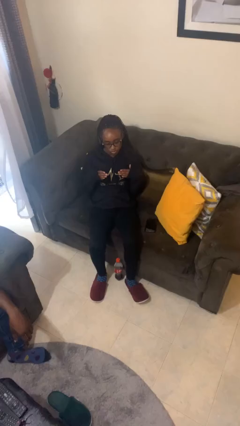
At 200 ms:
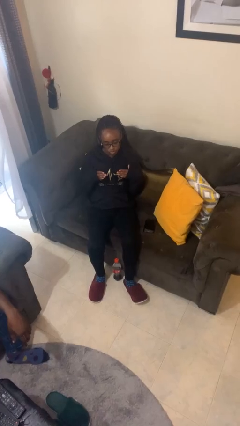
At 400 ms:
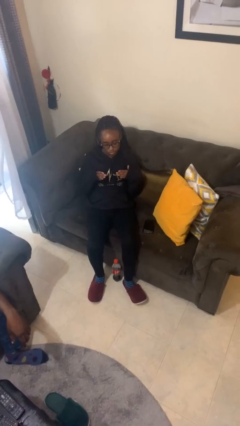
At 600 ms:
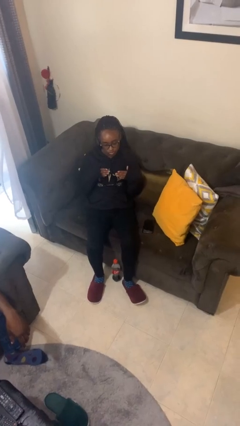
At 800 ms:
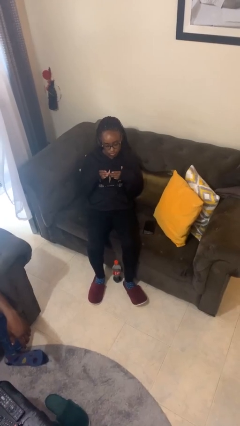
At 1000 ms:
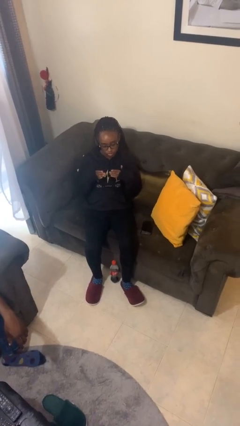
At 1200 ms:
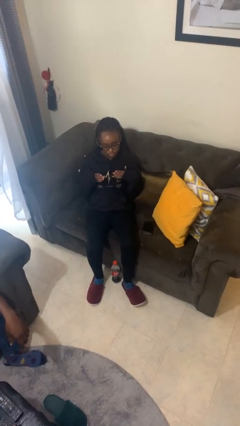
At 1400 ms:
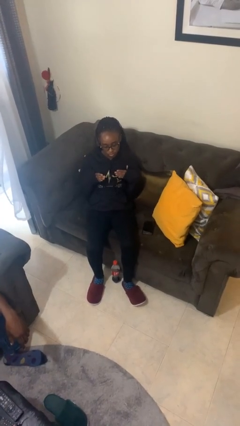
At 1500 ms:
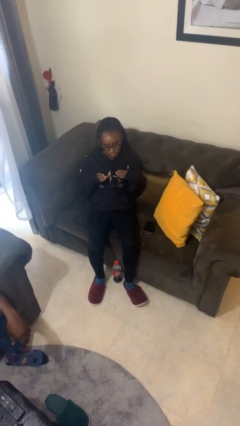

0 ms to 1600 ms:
person drums on chest

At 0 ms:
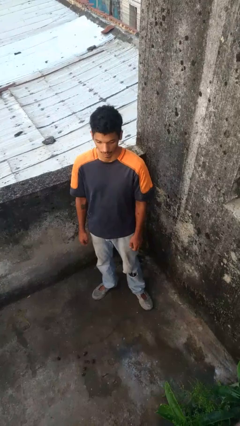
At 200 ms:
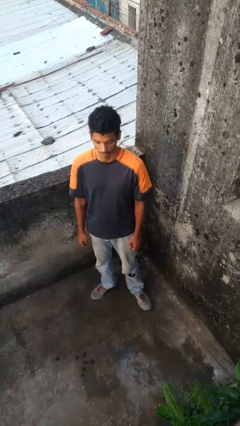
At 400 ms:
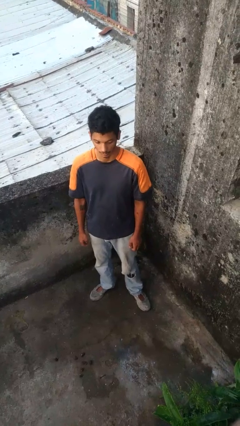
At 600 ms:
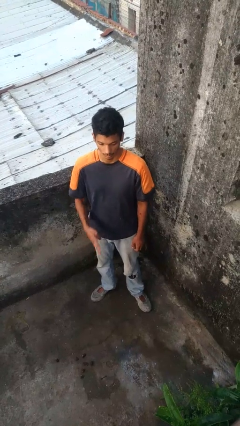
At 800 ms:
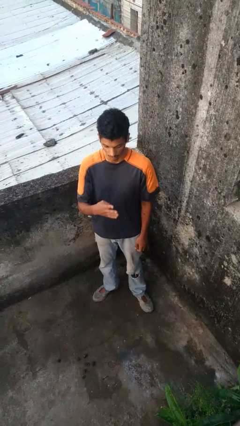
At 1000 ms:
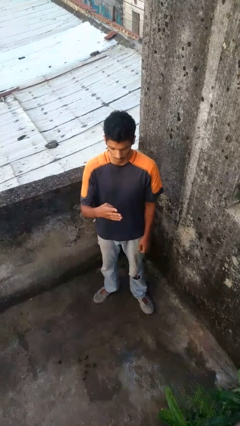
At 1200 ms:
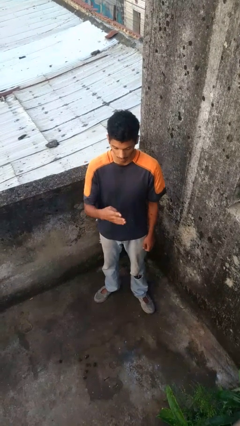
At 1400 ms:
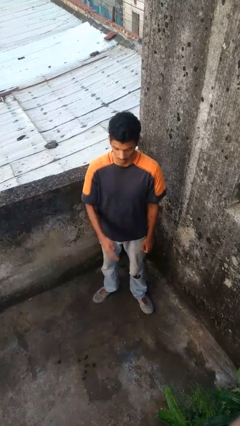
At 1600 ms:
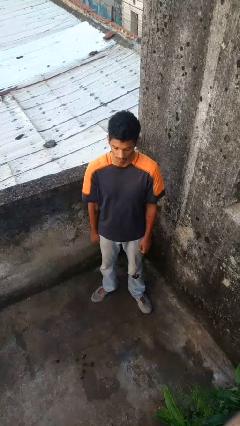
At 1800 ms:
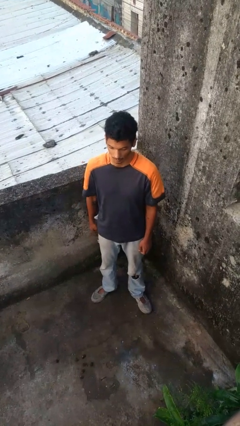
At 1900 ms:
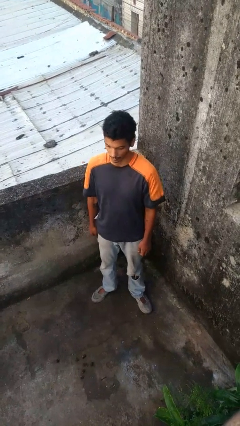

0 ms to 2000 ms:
person gestures number four

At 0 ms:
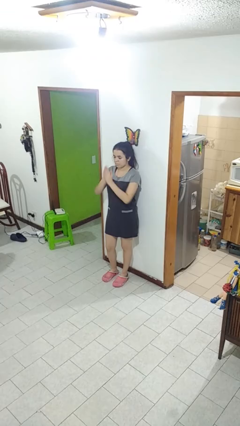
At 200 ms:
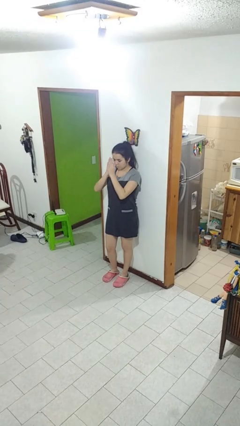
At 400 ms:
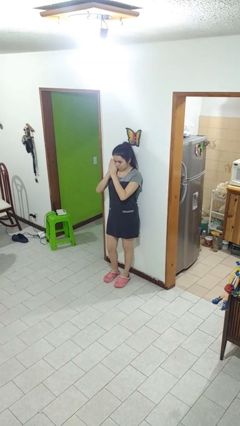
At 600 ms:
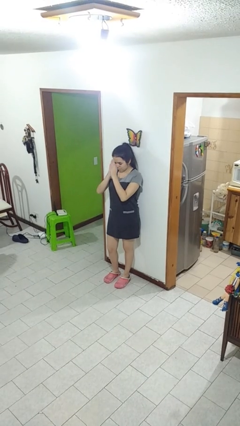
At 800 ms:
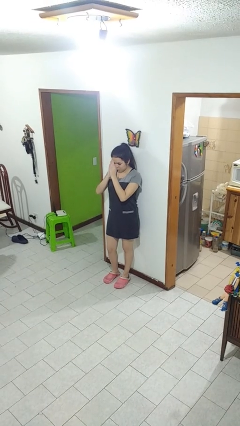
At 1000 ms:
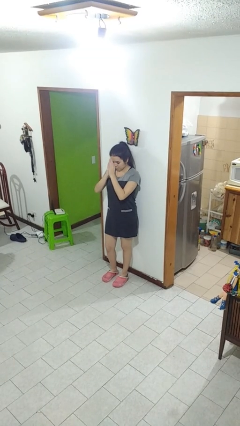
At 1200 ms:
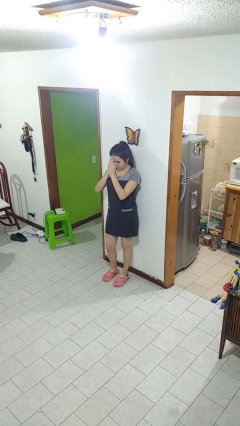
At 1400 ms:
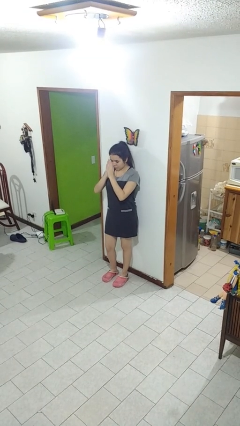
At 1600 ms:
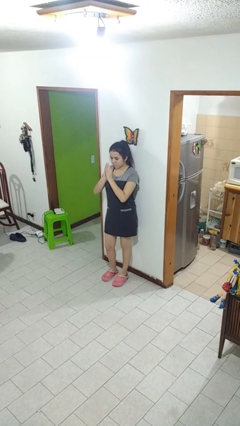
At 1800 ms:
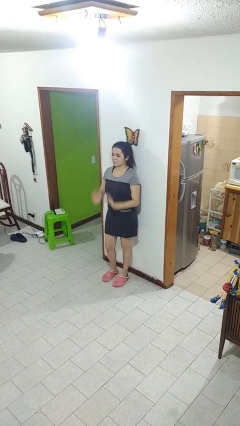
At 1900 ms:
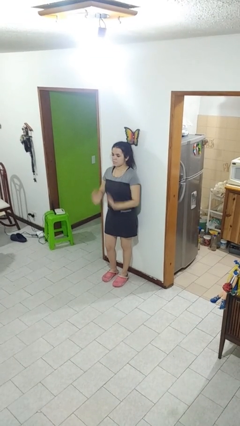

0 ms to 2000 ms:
person prays

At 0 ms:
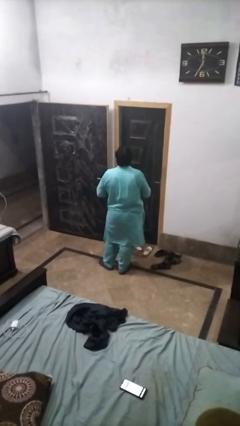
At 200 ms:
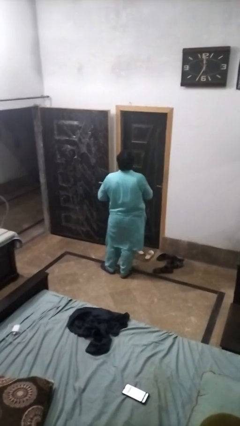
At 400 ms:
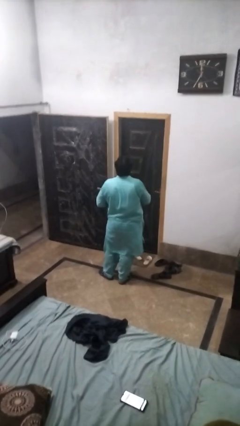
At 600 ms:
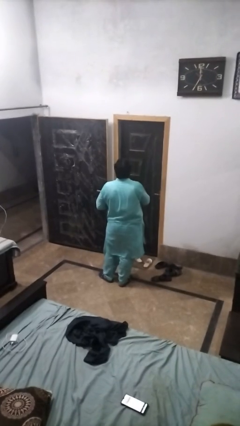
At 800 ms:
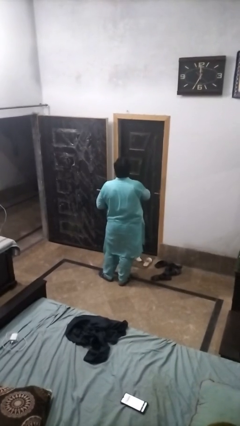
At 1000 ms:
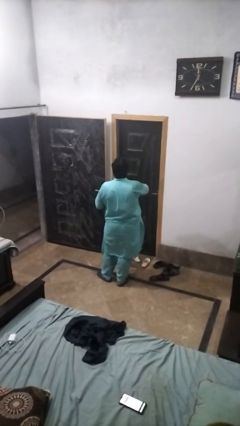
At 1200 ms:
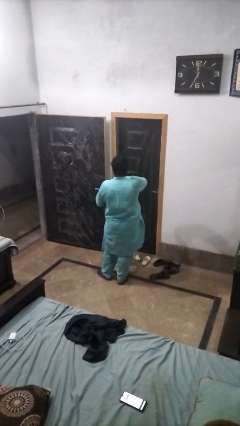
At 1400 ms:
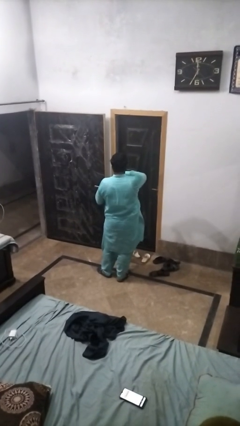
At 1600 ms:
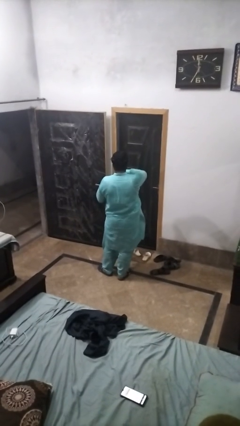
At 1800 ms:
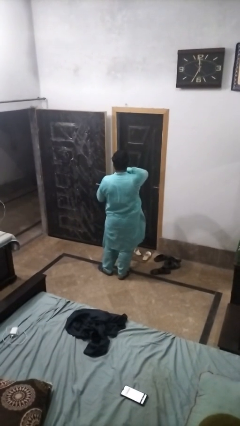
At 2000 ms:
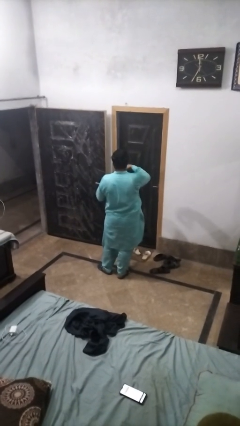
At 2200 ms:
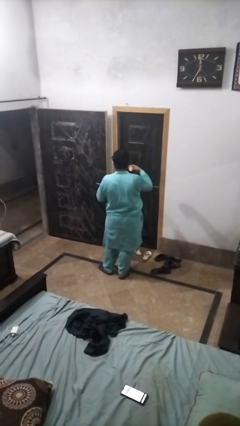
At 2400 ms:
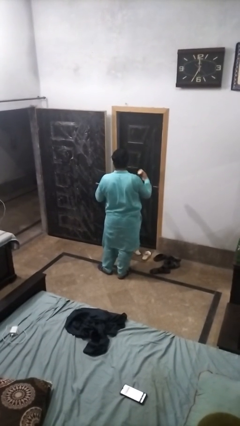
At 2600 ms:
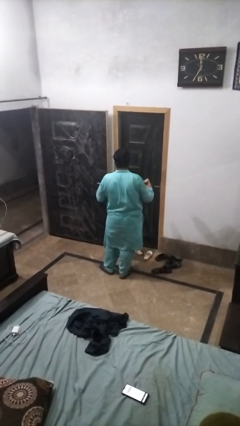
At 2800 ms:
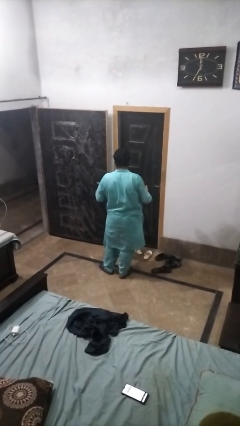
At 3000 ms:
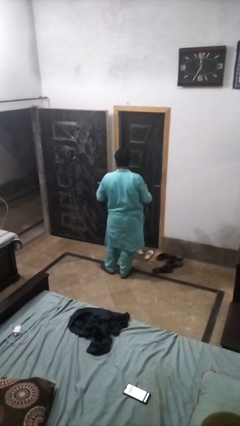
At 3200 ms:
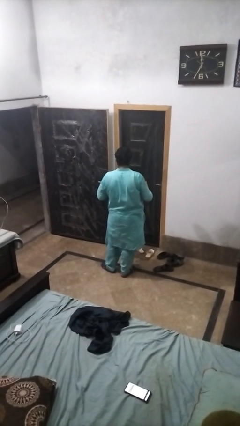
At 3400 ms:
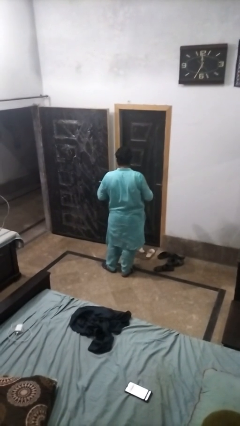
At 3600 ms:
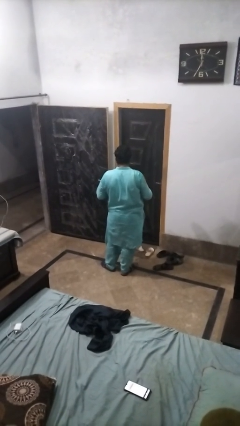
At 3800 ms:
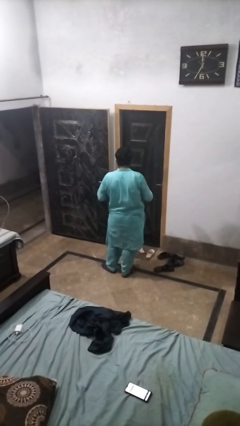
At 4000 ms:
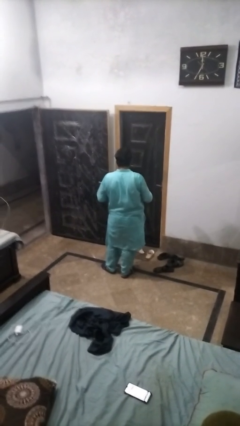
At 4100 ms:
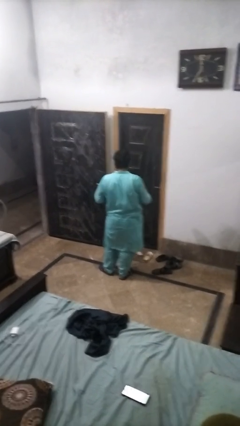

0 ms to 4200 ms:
person opens jar

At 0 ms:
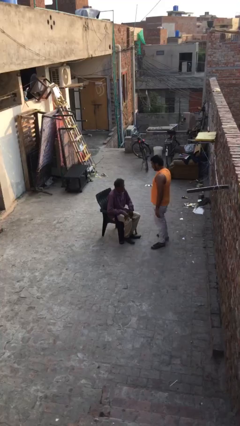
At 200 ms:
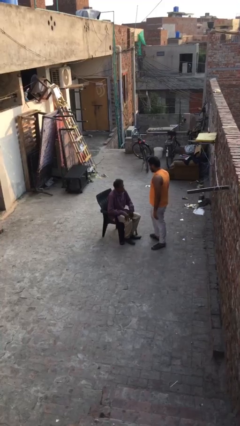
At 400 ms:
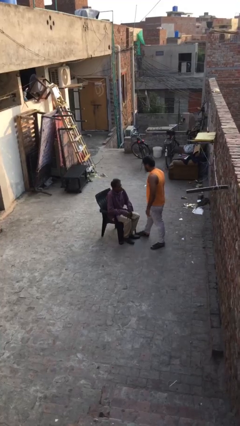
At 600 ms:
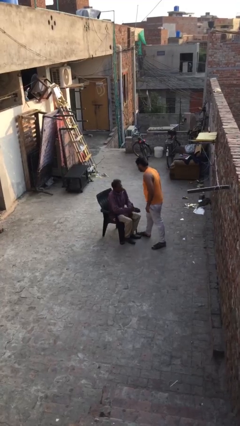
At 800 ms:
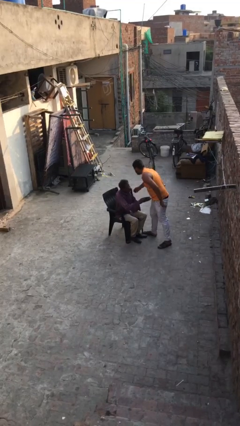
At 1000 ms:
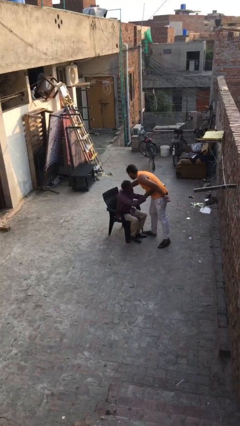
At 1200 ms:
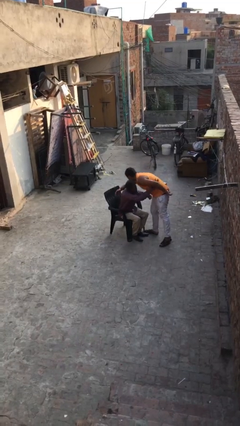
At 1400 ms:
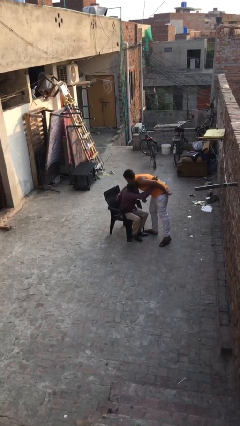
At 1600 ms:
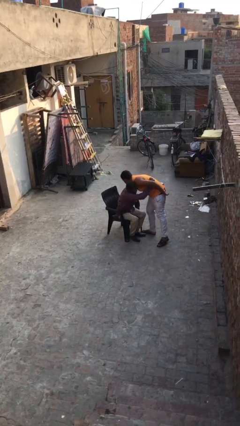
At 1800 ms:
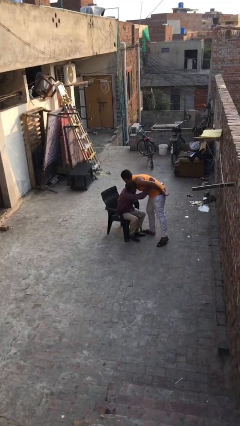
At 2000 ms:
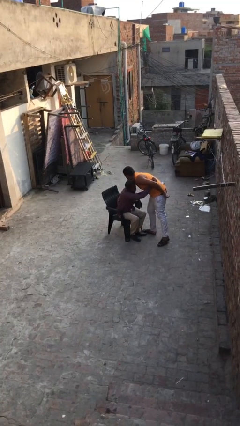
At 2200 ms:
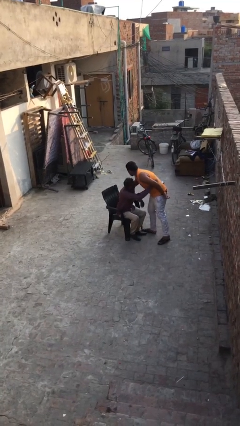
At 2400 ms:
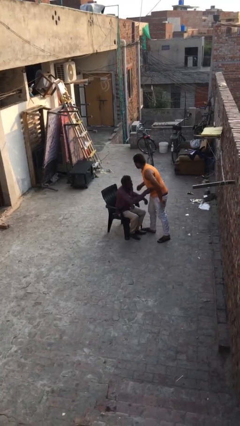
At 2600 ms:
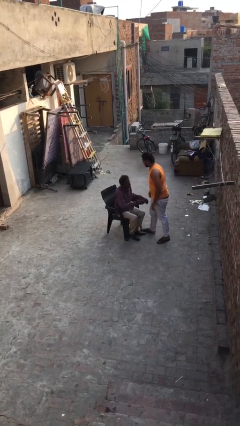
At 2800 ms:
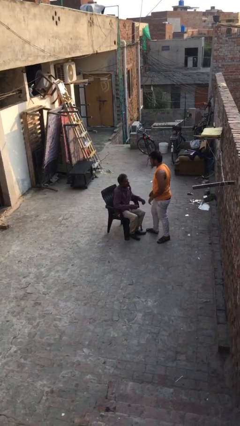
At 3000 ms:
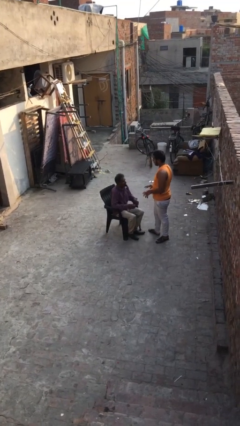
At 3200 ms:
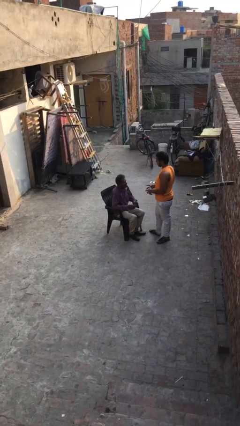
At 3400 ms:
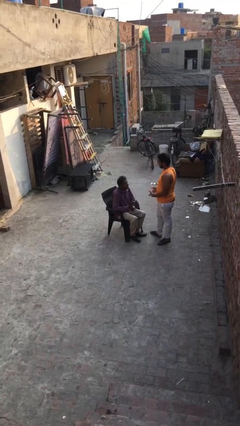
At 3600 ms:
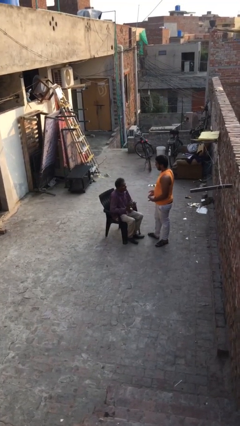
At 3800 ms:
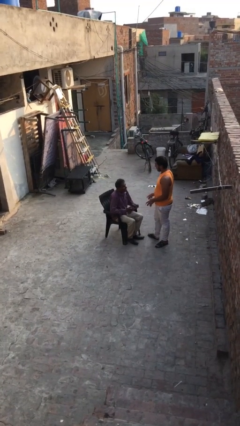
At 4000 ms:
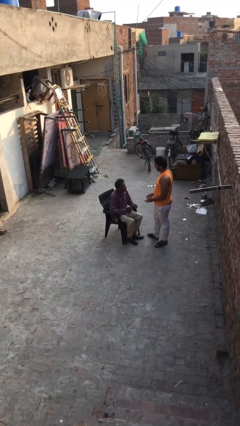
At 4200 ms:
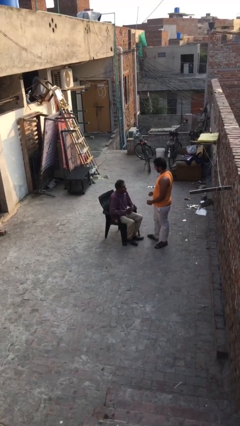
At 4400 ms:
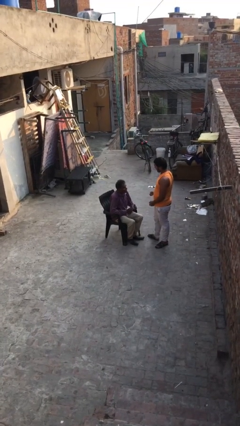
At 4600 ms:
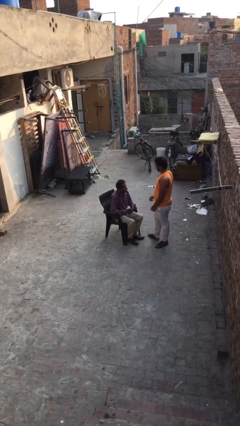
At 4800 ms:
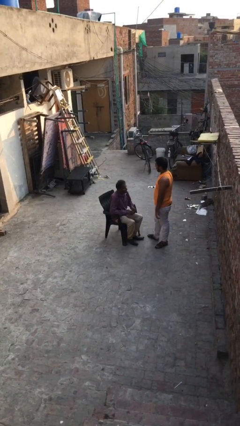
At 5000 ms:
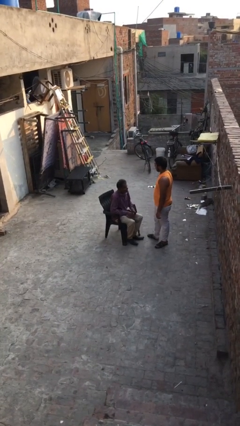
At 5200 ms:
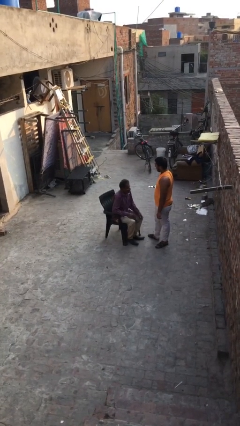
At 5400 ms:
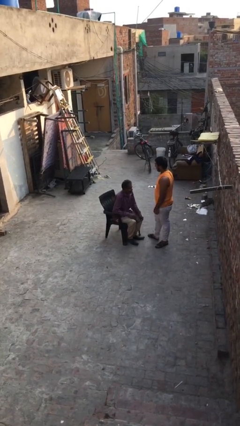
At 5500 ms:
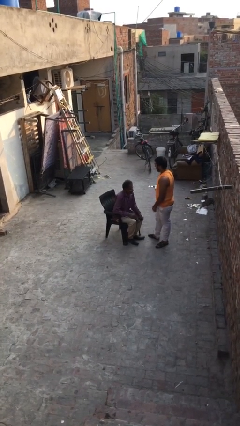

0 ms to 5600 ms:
person embraces person

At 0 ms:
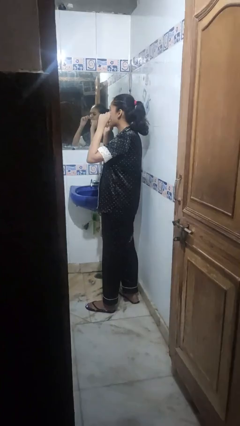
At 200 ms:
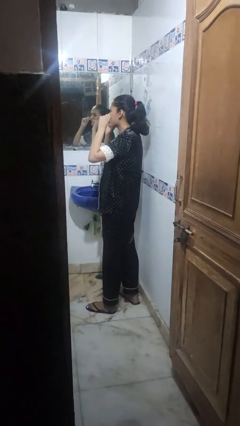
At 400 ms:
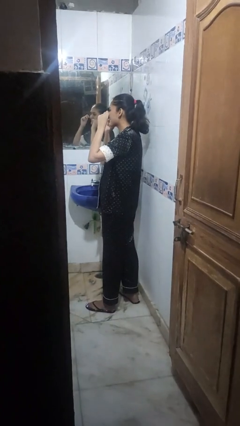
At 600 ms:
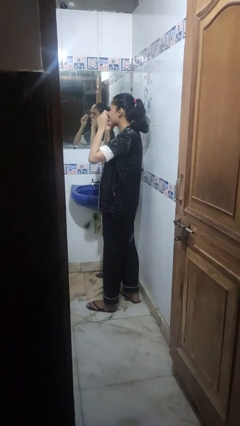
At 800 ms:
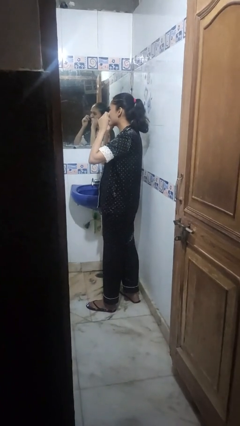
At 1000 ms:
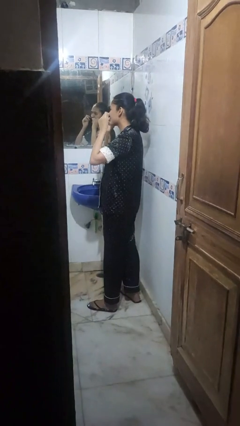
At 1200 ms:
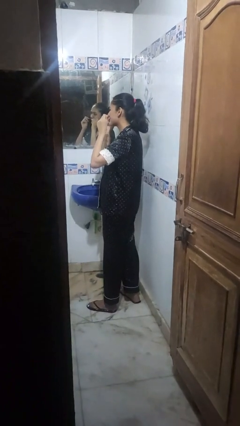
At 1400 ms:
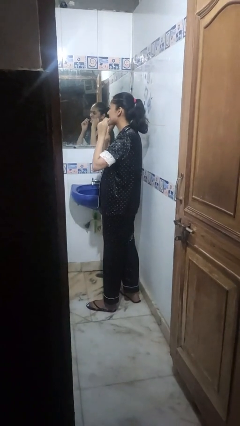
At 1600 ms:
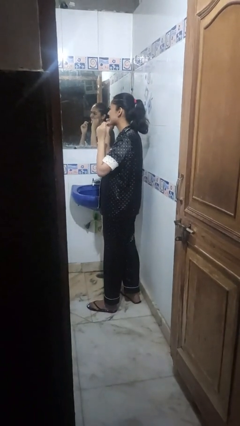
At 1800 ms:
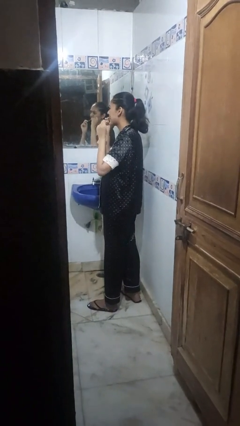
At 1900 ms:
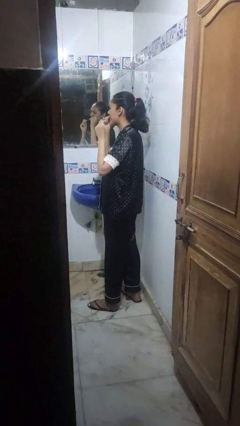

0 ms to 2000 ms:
person flosses
